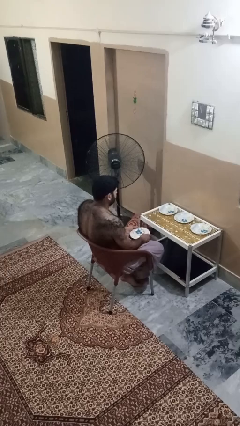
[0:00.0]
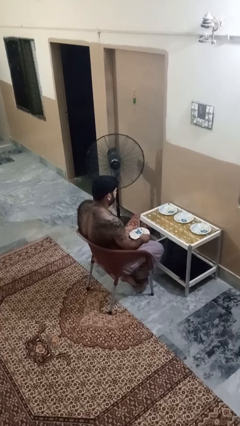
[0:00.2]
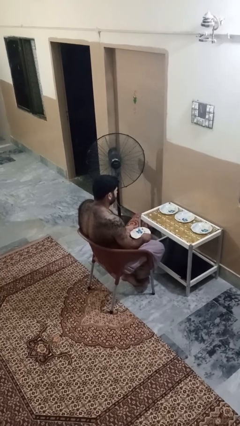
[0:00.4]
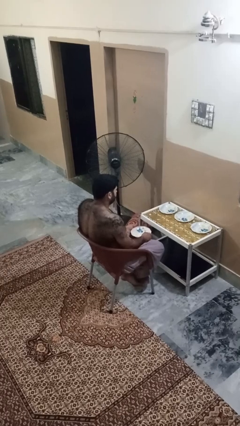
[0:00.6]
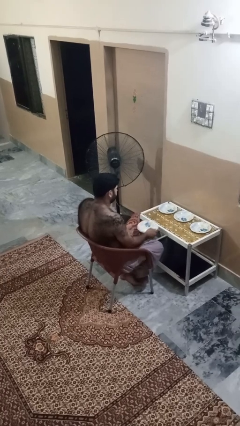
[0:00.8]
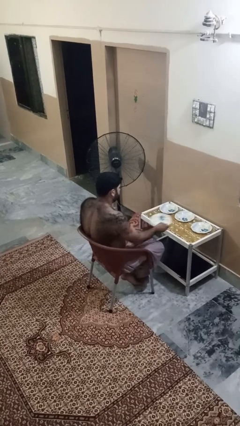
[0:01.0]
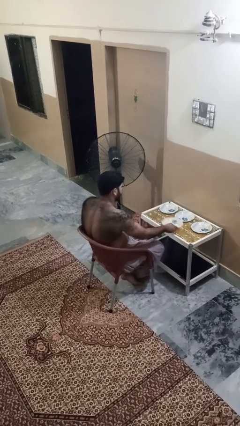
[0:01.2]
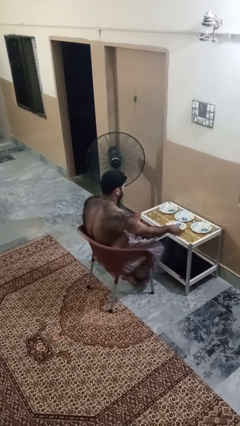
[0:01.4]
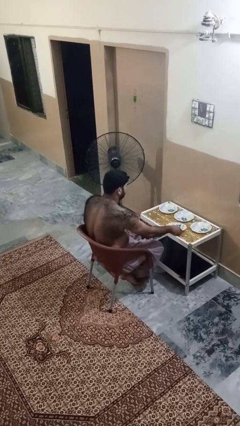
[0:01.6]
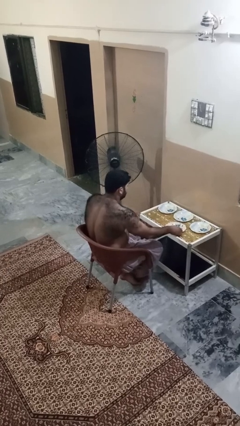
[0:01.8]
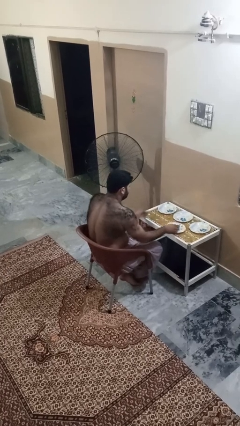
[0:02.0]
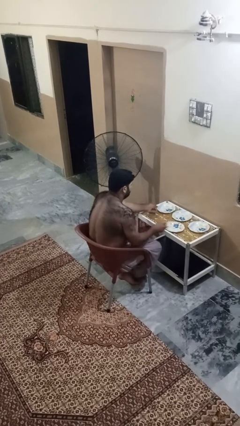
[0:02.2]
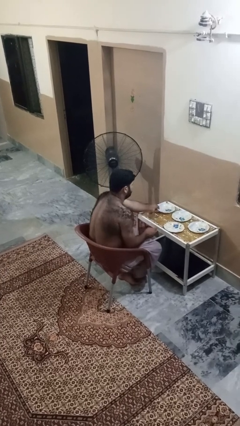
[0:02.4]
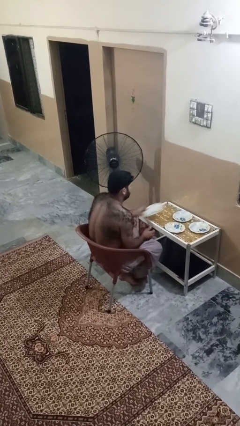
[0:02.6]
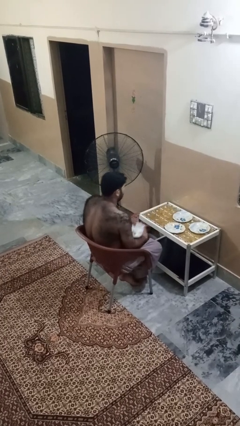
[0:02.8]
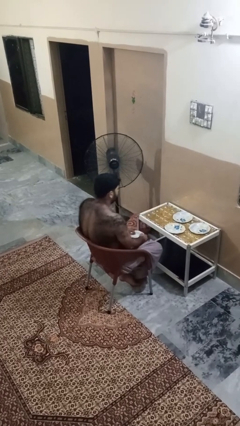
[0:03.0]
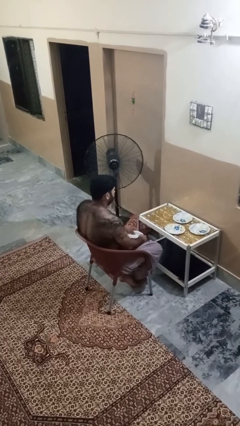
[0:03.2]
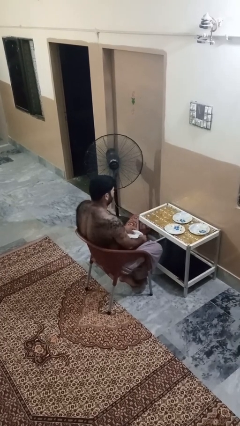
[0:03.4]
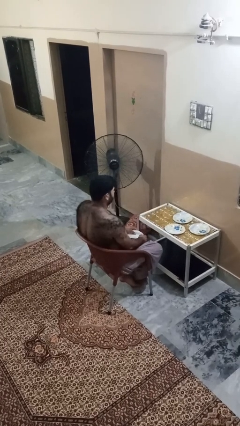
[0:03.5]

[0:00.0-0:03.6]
person sets table

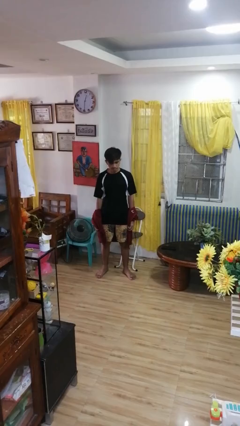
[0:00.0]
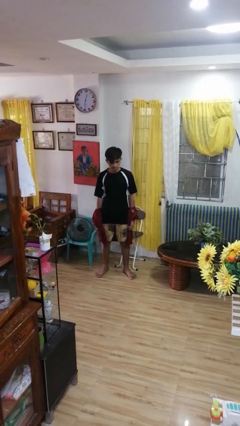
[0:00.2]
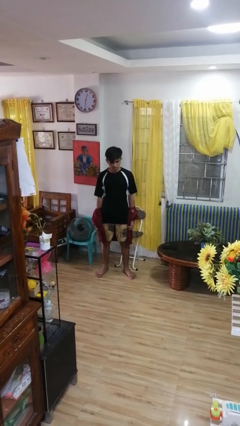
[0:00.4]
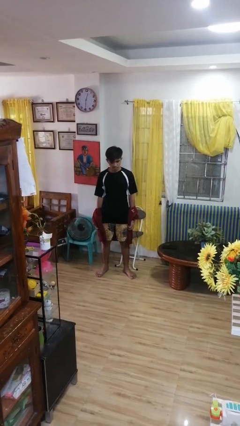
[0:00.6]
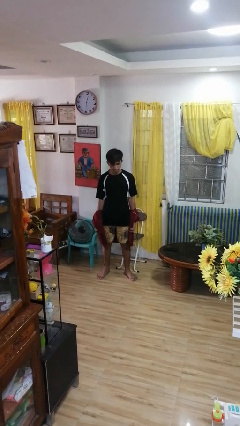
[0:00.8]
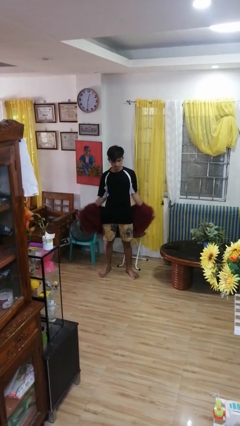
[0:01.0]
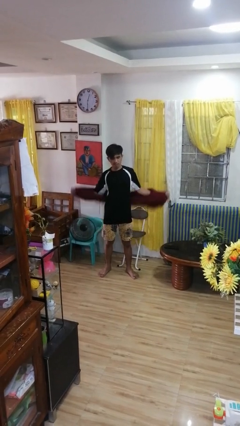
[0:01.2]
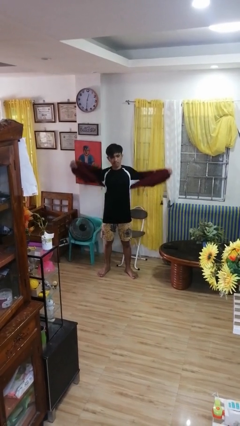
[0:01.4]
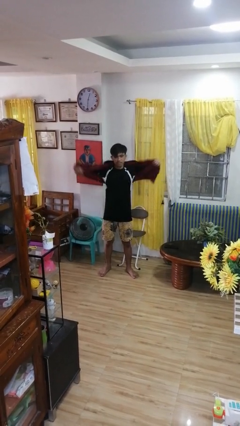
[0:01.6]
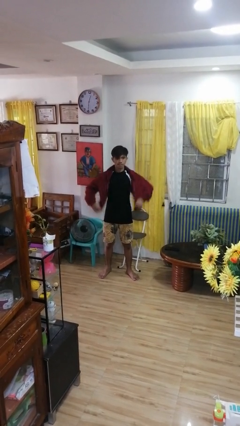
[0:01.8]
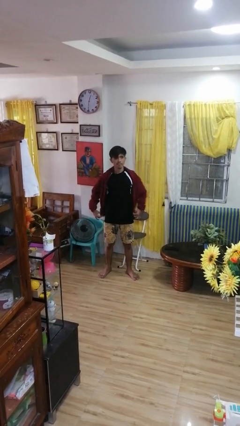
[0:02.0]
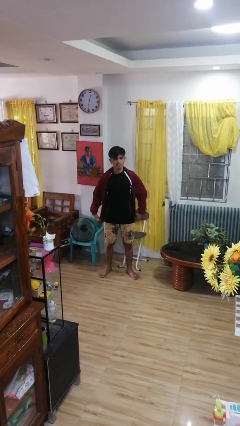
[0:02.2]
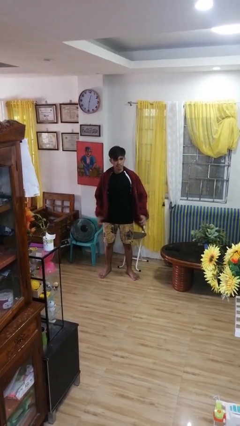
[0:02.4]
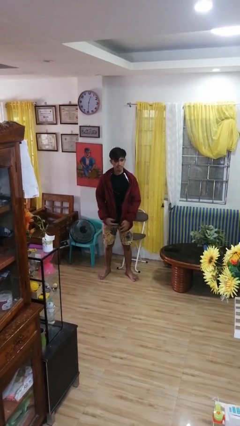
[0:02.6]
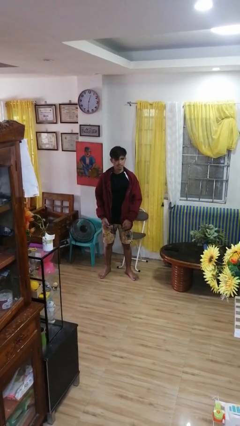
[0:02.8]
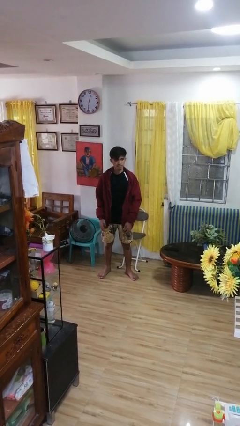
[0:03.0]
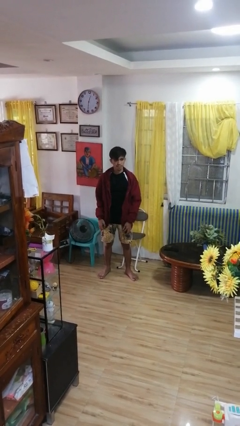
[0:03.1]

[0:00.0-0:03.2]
person puts on jacket

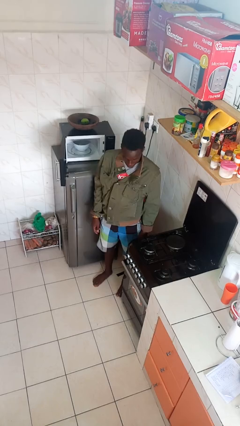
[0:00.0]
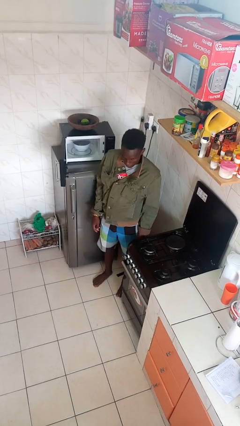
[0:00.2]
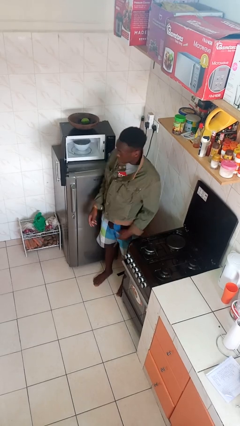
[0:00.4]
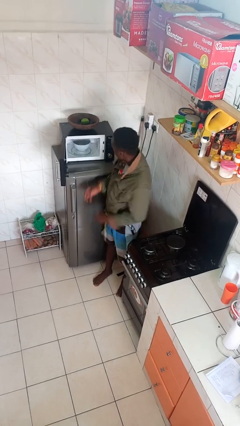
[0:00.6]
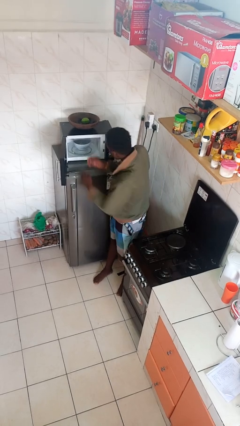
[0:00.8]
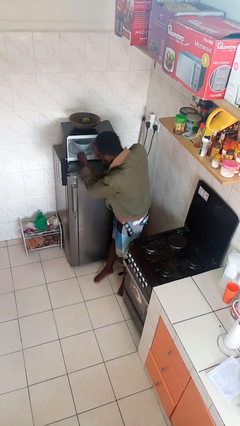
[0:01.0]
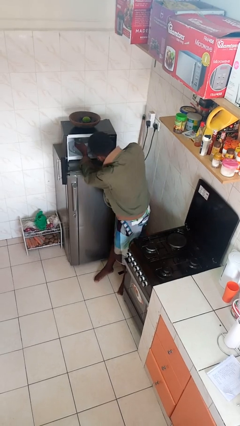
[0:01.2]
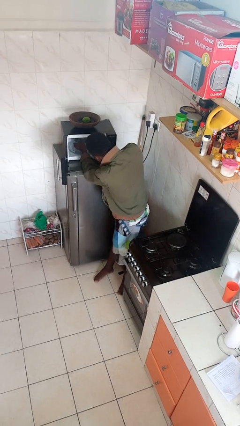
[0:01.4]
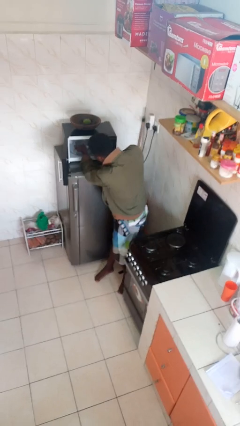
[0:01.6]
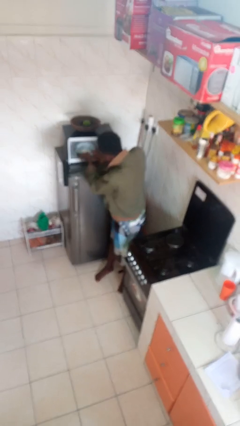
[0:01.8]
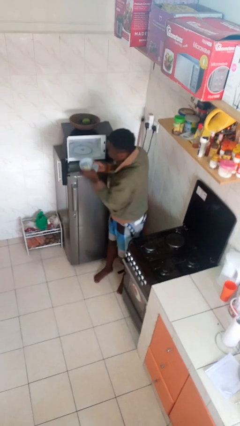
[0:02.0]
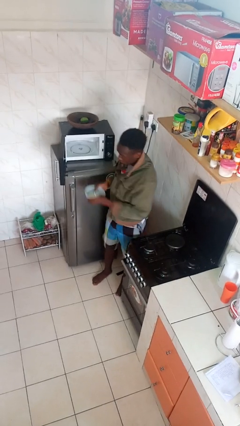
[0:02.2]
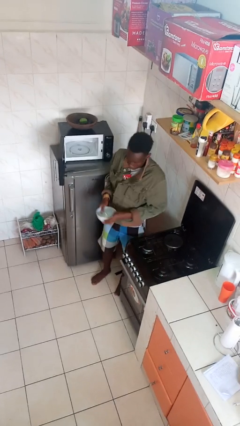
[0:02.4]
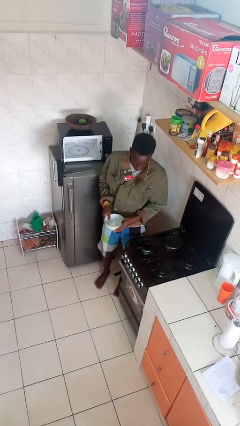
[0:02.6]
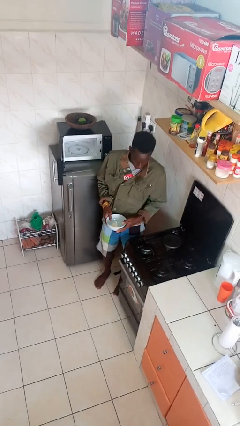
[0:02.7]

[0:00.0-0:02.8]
person takes object from microwave

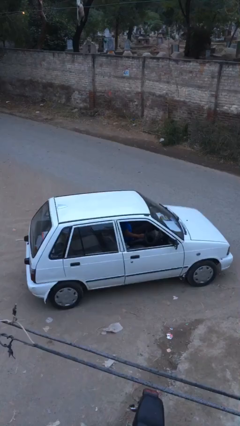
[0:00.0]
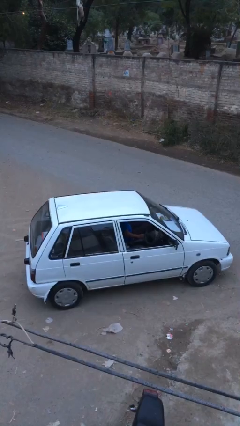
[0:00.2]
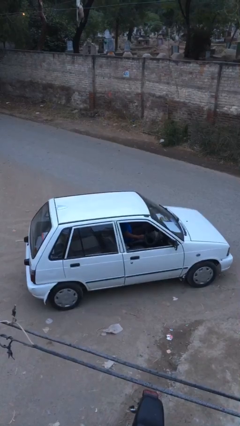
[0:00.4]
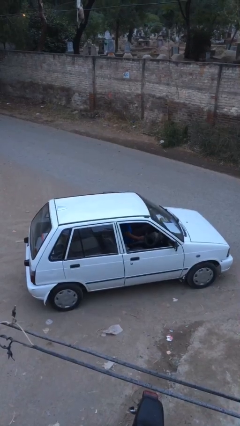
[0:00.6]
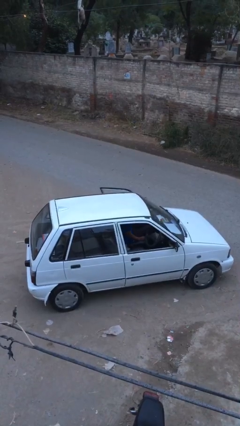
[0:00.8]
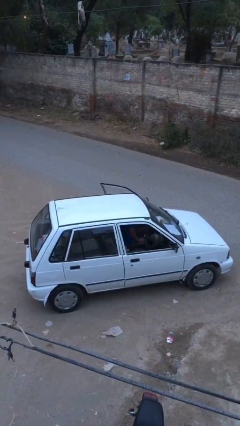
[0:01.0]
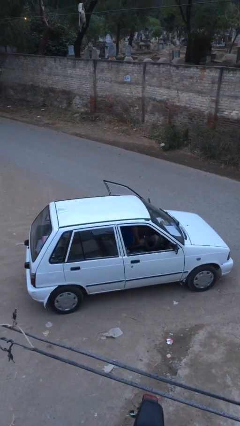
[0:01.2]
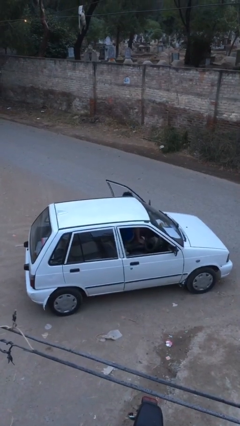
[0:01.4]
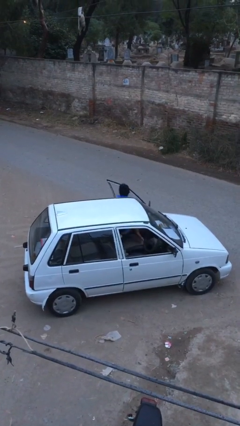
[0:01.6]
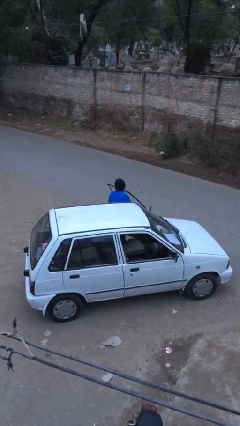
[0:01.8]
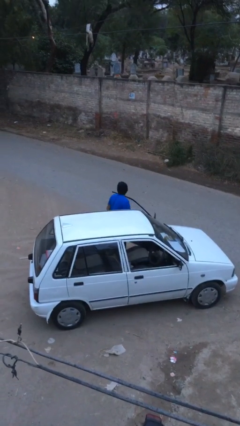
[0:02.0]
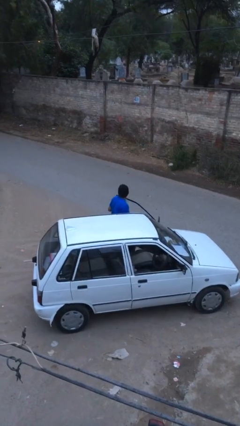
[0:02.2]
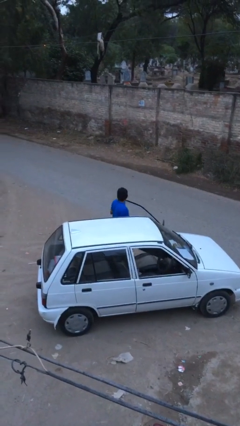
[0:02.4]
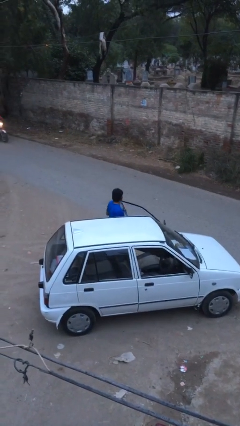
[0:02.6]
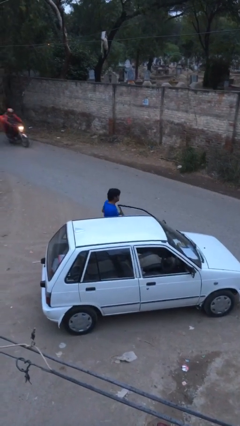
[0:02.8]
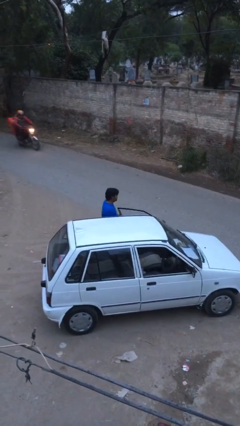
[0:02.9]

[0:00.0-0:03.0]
person exits car

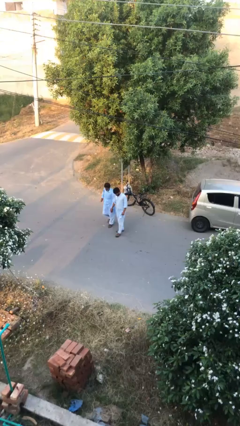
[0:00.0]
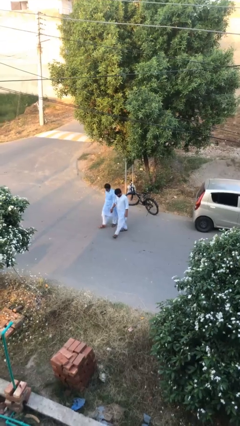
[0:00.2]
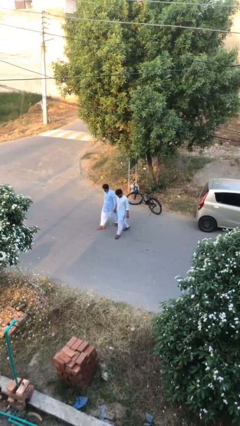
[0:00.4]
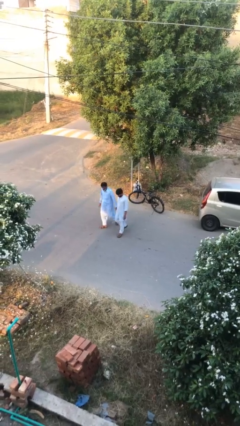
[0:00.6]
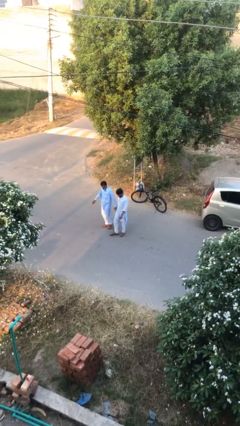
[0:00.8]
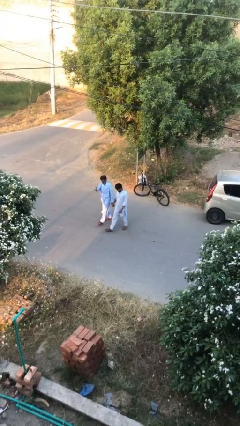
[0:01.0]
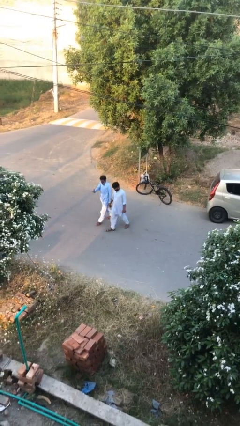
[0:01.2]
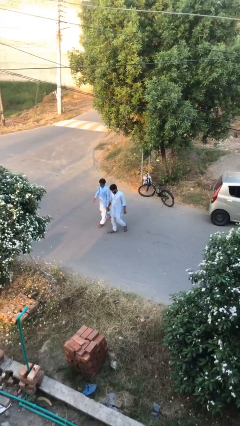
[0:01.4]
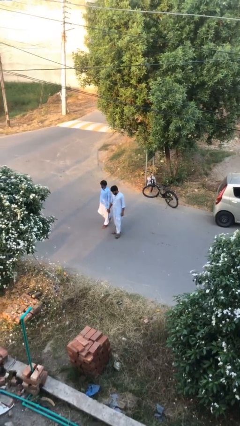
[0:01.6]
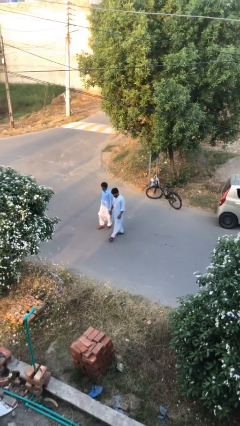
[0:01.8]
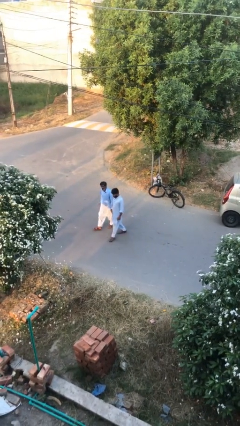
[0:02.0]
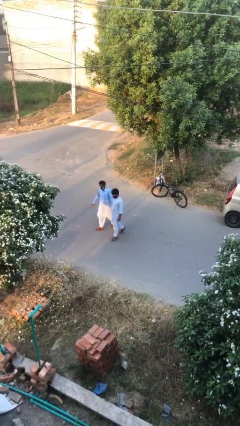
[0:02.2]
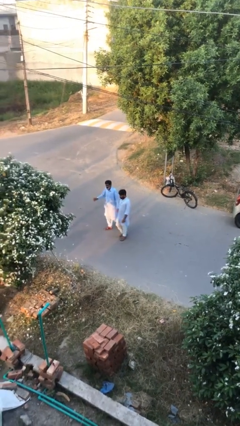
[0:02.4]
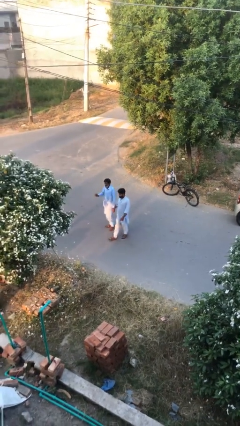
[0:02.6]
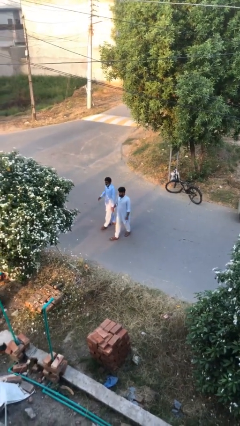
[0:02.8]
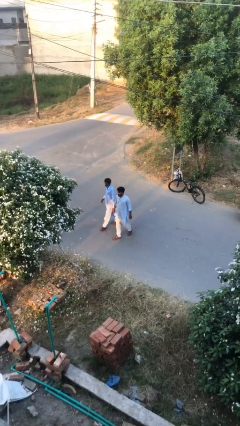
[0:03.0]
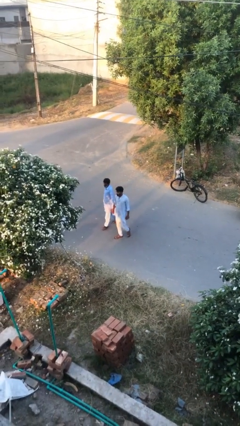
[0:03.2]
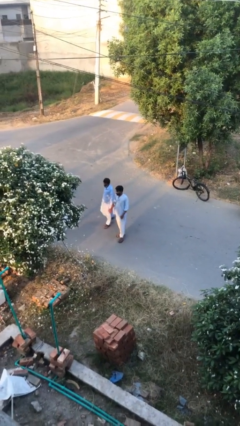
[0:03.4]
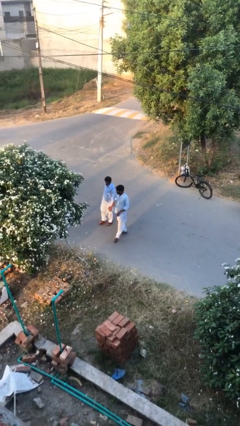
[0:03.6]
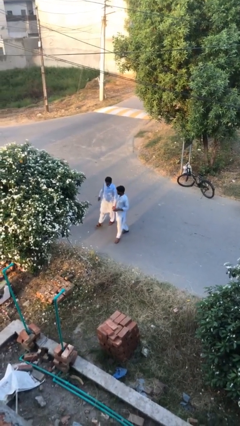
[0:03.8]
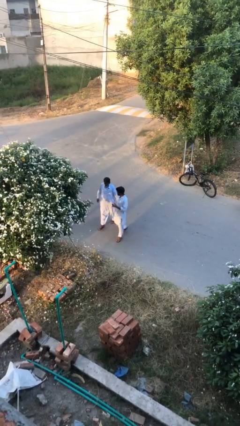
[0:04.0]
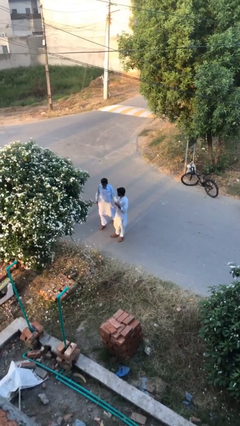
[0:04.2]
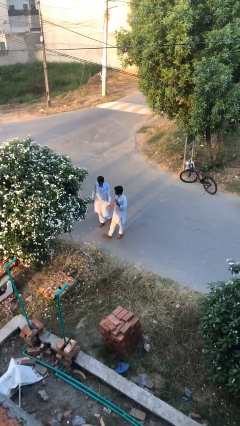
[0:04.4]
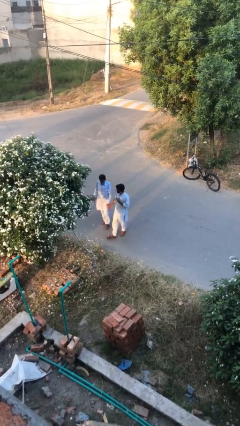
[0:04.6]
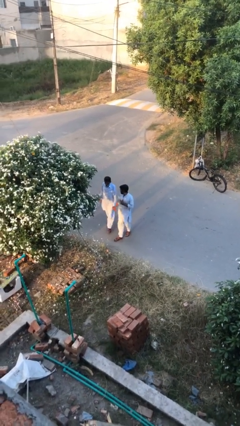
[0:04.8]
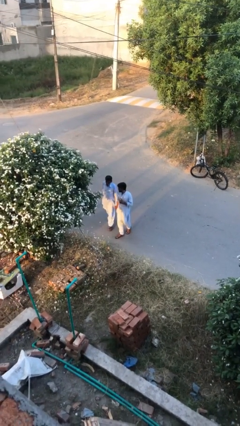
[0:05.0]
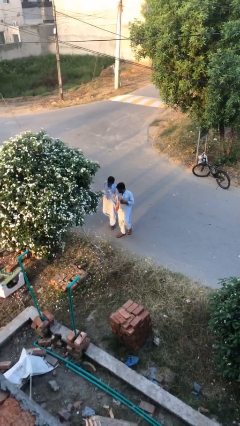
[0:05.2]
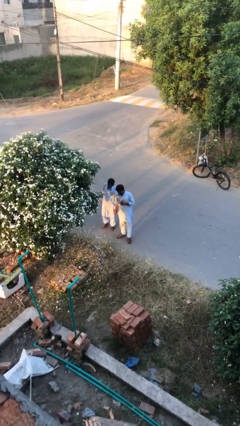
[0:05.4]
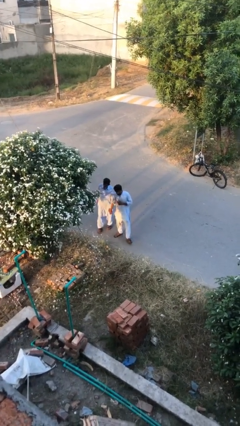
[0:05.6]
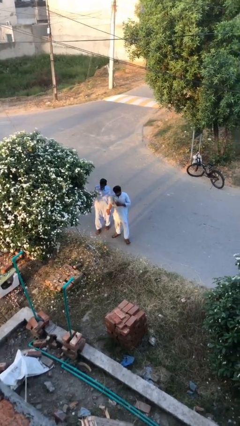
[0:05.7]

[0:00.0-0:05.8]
person holds hand
